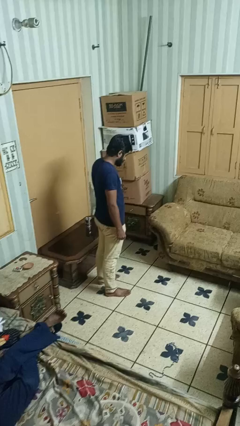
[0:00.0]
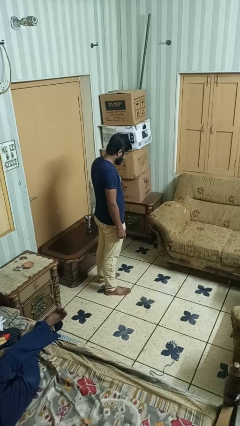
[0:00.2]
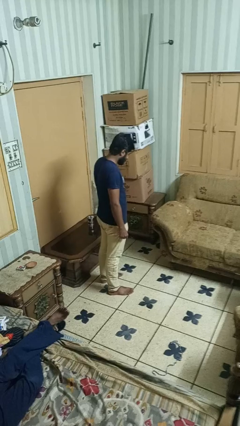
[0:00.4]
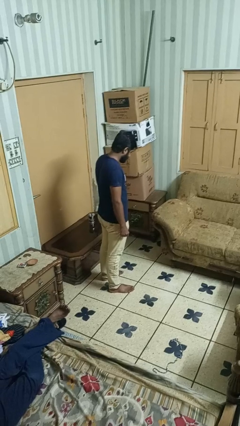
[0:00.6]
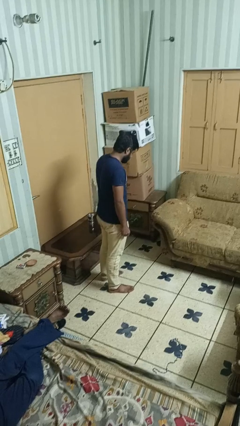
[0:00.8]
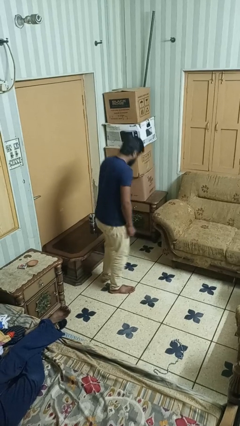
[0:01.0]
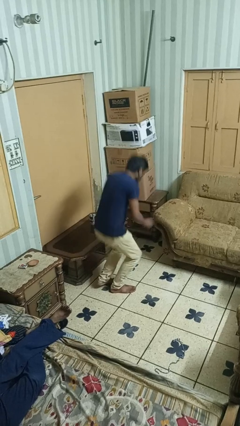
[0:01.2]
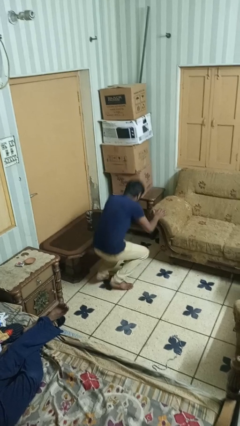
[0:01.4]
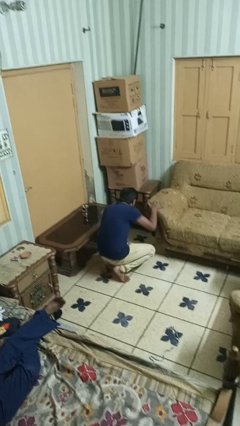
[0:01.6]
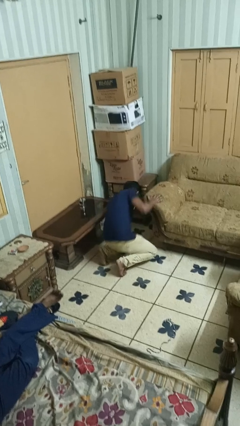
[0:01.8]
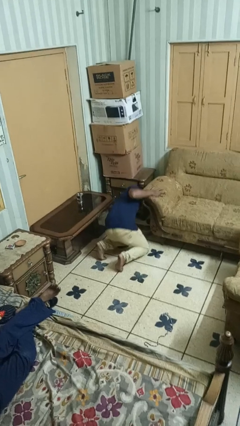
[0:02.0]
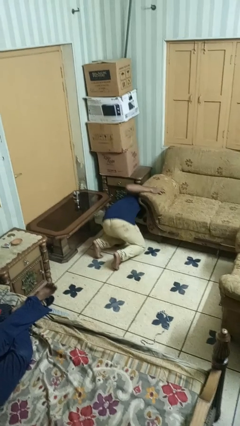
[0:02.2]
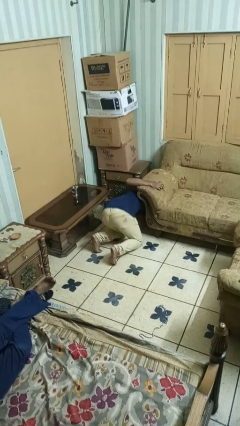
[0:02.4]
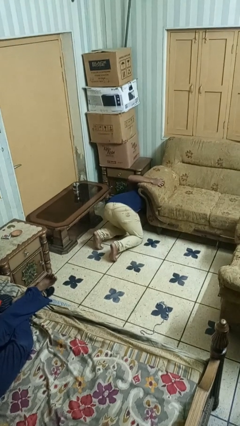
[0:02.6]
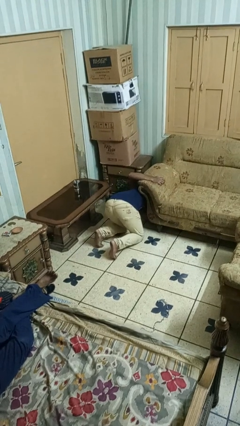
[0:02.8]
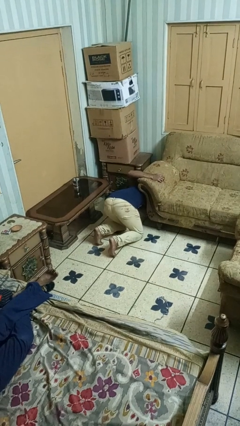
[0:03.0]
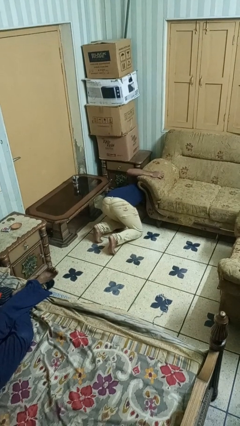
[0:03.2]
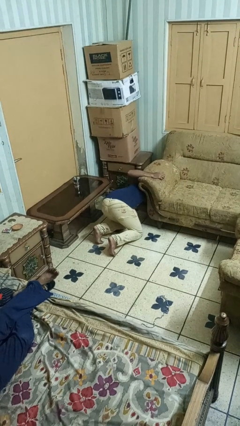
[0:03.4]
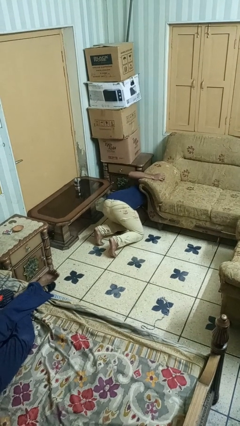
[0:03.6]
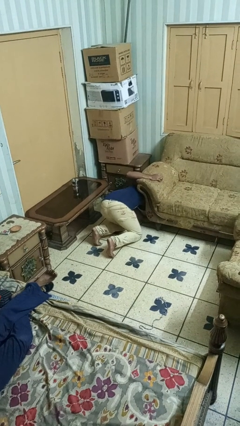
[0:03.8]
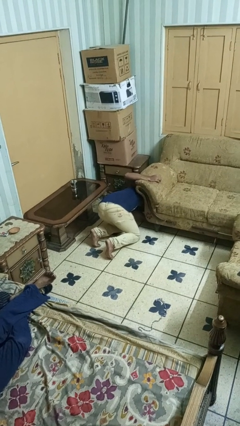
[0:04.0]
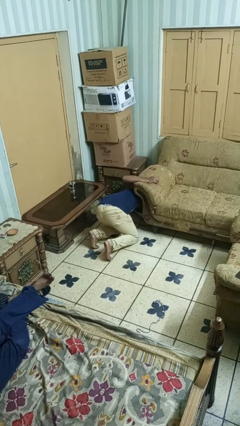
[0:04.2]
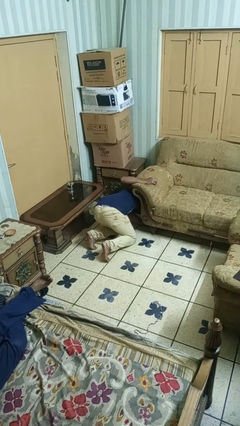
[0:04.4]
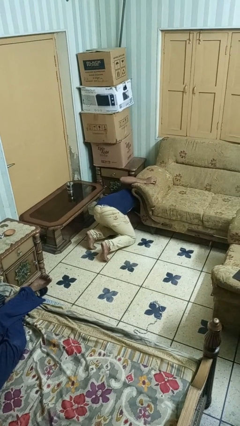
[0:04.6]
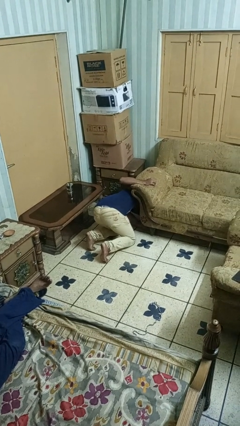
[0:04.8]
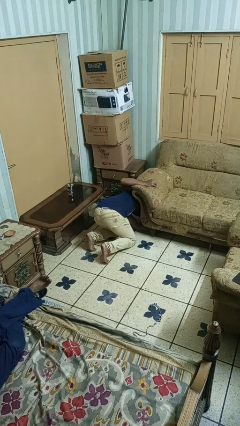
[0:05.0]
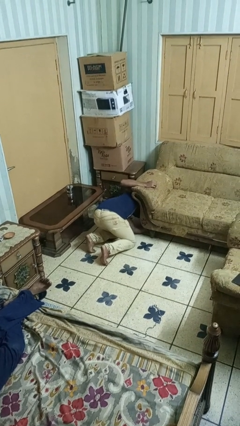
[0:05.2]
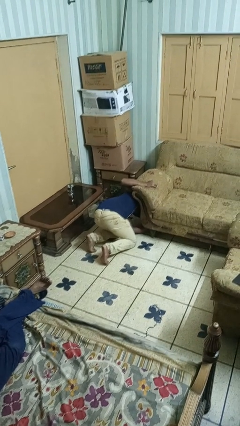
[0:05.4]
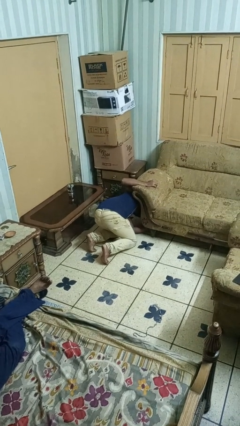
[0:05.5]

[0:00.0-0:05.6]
person searches under couch

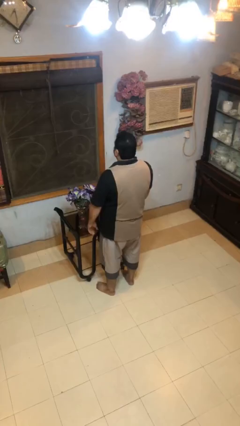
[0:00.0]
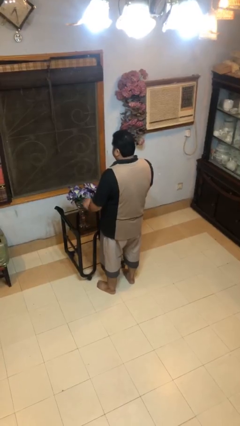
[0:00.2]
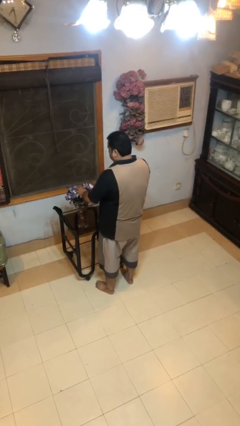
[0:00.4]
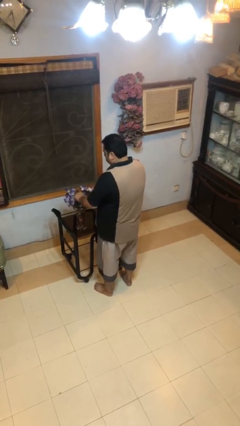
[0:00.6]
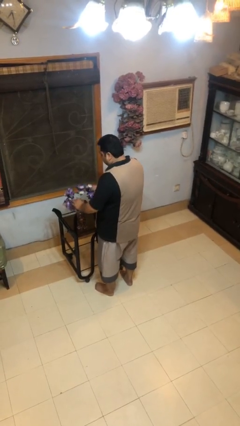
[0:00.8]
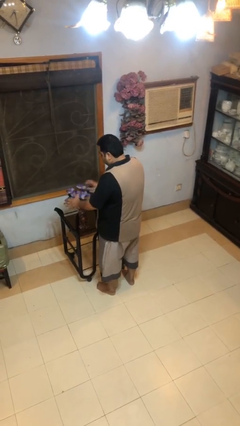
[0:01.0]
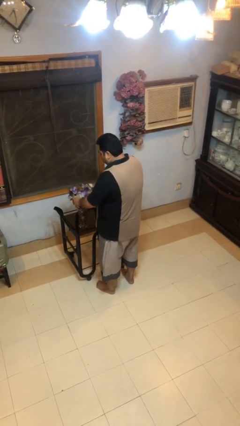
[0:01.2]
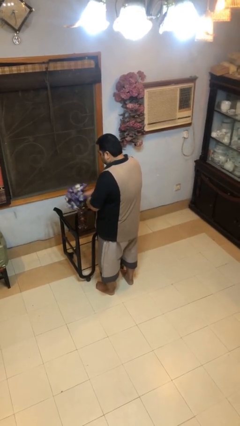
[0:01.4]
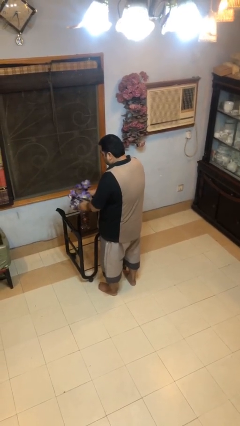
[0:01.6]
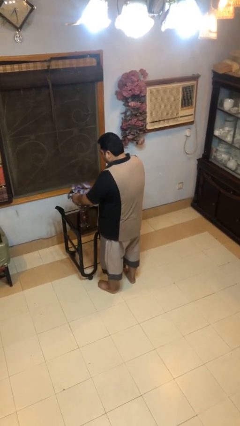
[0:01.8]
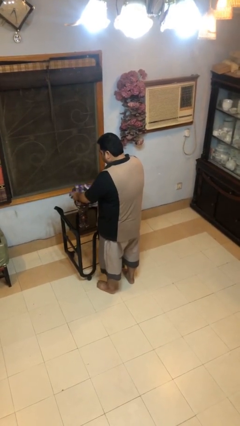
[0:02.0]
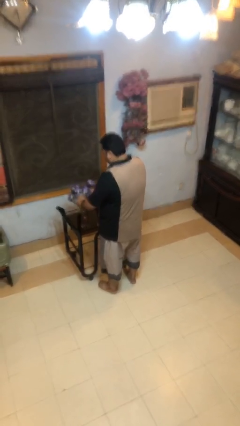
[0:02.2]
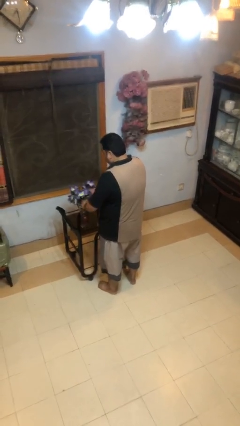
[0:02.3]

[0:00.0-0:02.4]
person arranges flowers in vase

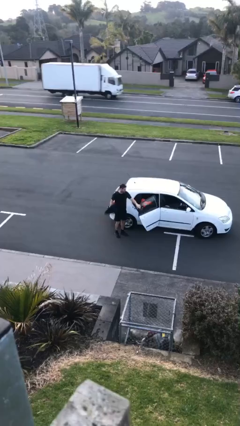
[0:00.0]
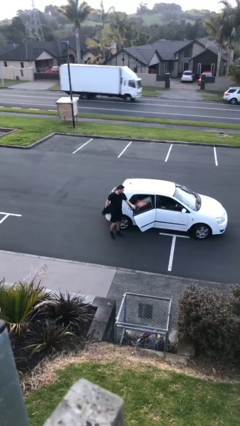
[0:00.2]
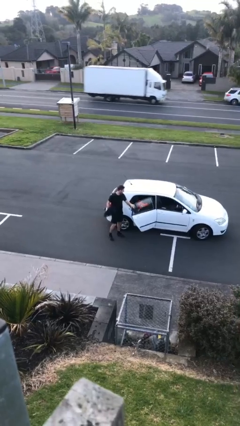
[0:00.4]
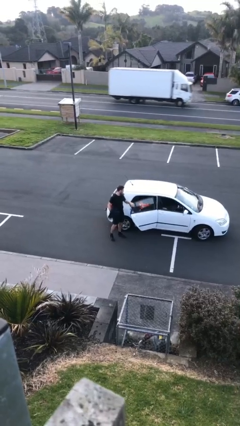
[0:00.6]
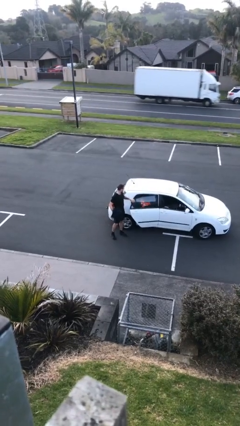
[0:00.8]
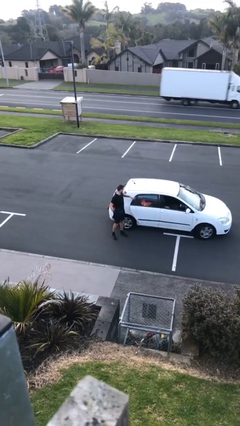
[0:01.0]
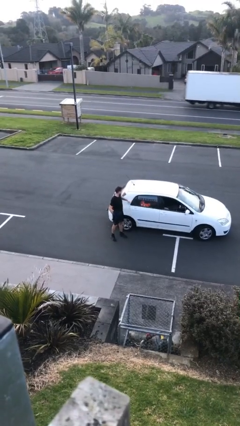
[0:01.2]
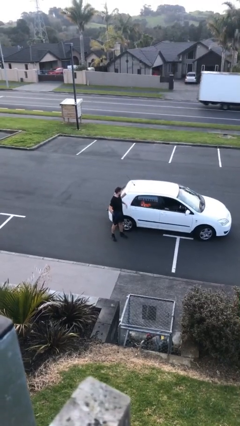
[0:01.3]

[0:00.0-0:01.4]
person closes car door

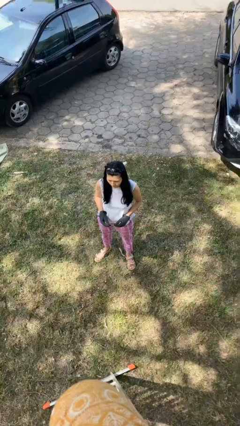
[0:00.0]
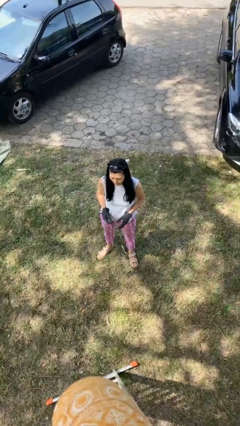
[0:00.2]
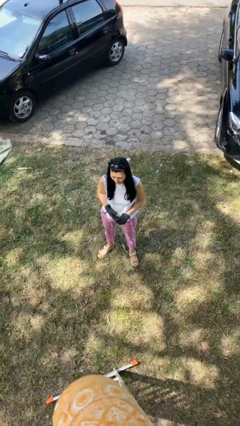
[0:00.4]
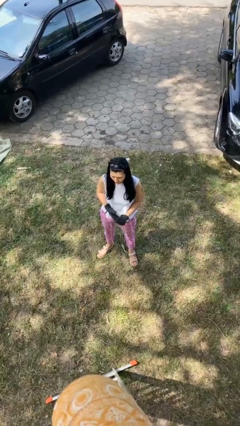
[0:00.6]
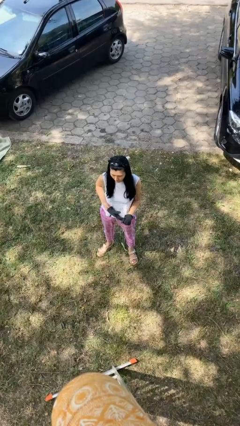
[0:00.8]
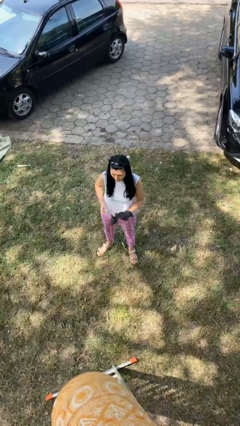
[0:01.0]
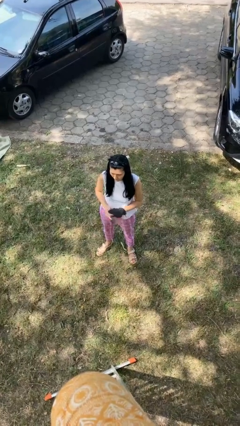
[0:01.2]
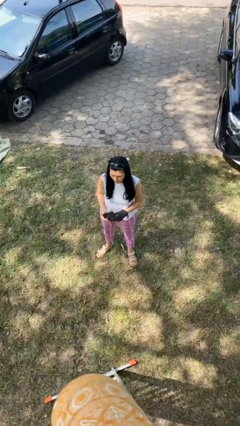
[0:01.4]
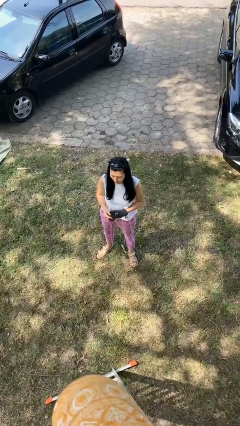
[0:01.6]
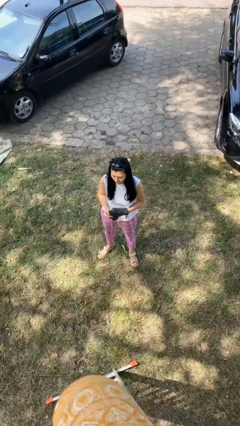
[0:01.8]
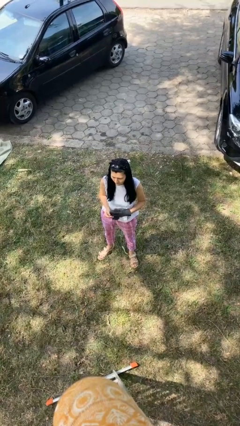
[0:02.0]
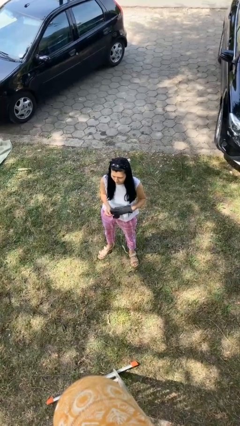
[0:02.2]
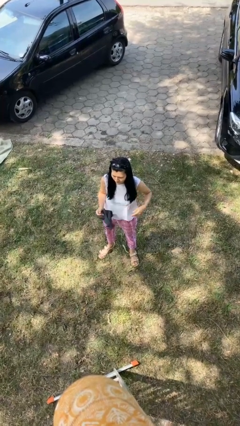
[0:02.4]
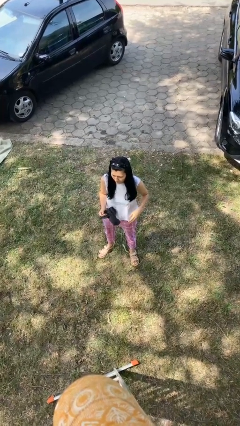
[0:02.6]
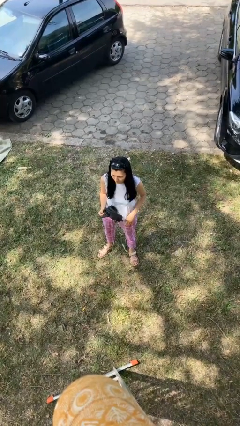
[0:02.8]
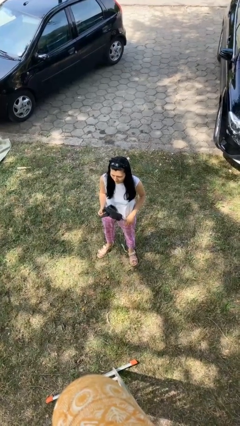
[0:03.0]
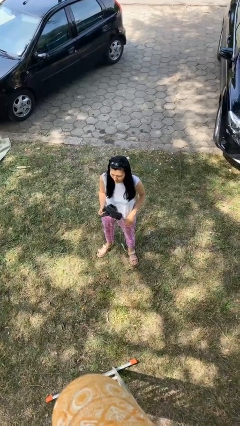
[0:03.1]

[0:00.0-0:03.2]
person takes off gloves

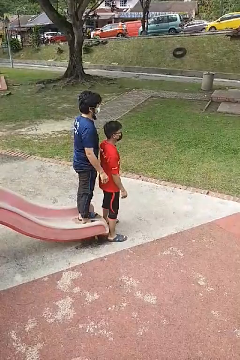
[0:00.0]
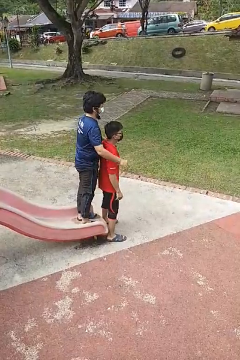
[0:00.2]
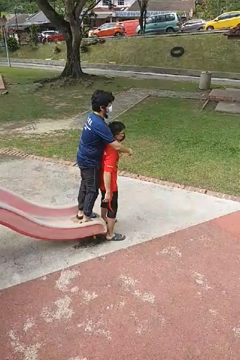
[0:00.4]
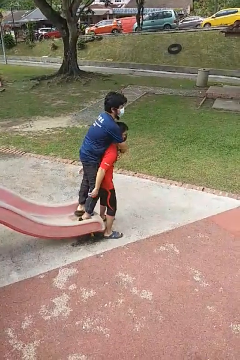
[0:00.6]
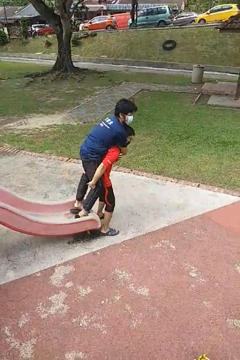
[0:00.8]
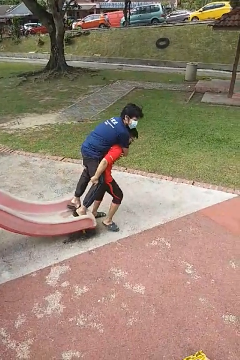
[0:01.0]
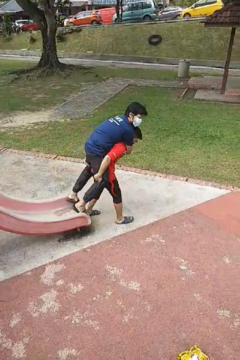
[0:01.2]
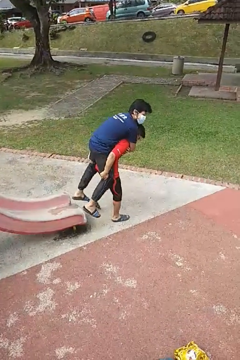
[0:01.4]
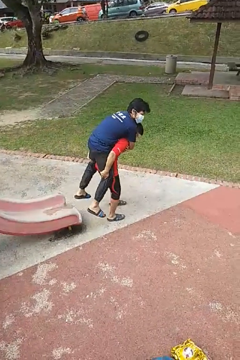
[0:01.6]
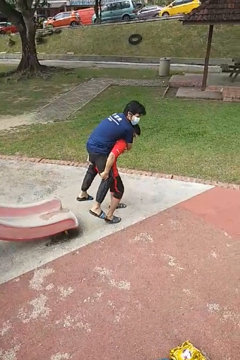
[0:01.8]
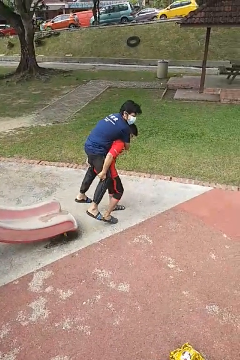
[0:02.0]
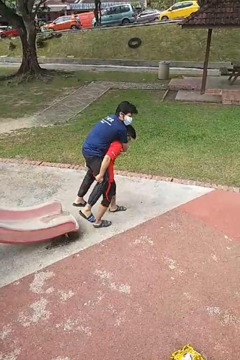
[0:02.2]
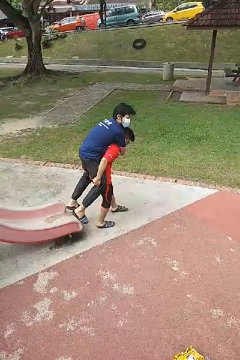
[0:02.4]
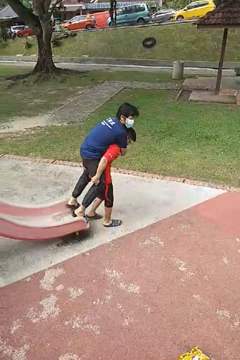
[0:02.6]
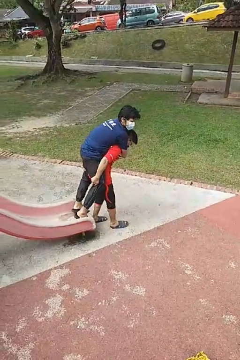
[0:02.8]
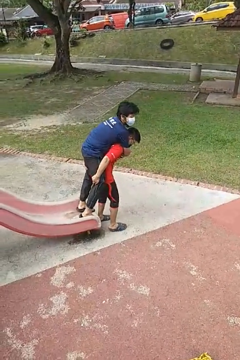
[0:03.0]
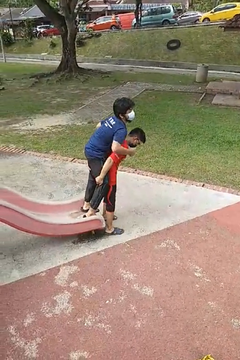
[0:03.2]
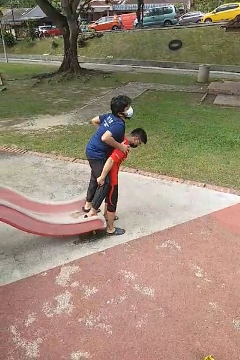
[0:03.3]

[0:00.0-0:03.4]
person carries person on back

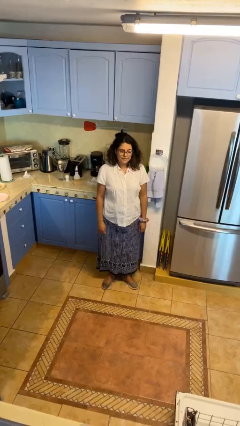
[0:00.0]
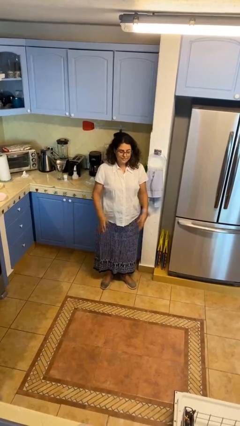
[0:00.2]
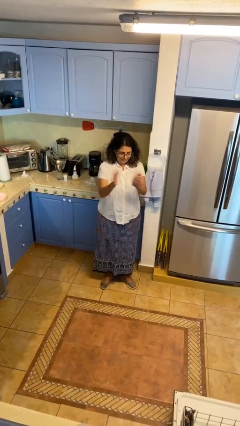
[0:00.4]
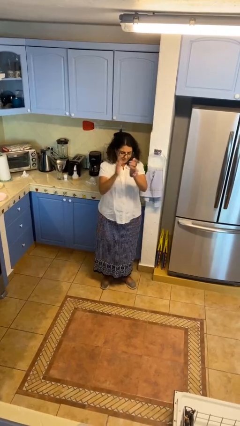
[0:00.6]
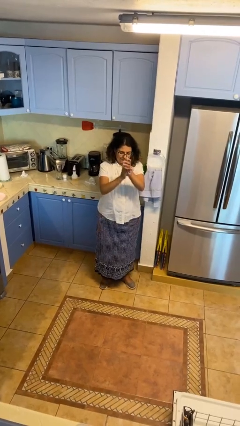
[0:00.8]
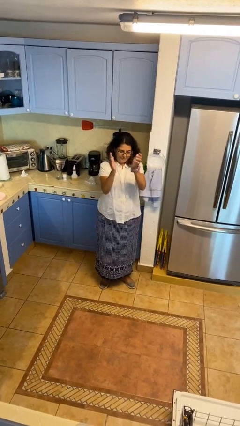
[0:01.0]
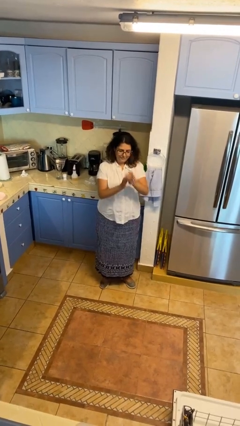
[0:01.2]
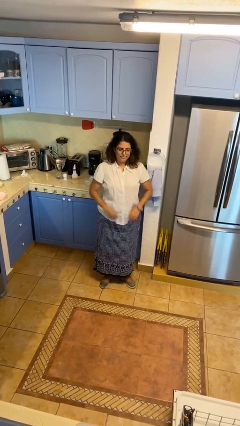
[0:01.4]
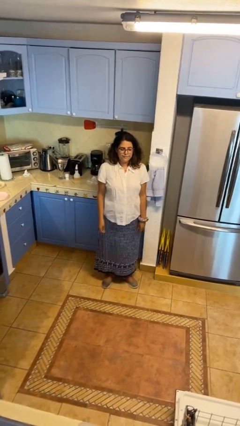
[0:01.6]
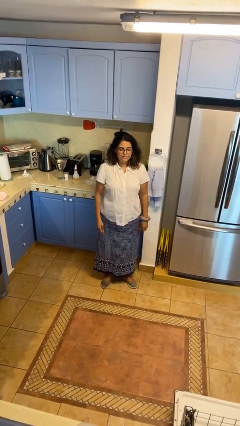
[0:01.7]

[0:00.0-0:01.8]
person claps hands
